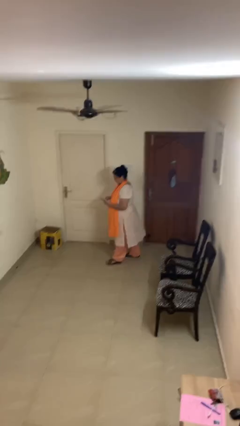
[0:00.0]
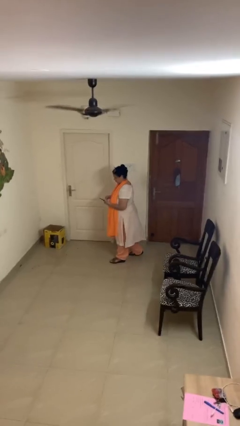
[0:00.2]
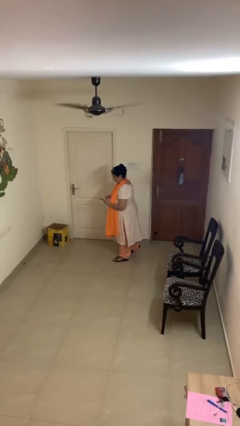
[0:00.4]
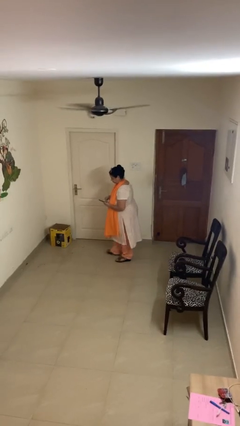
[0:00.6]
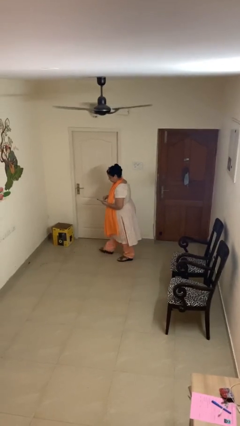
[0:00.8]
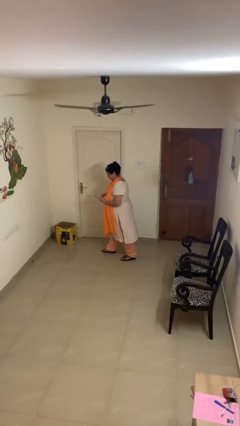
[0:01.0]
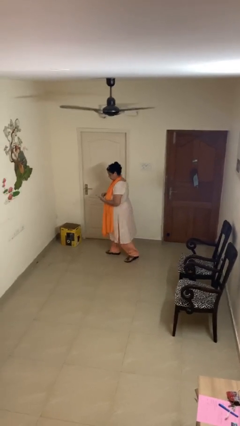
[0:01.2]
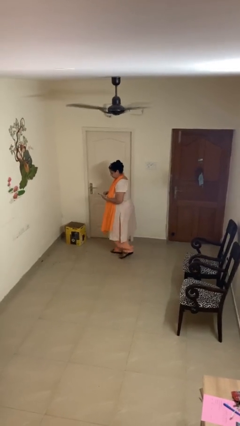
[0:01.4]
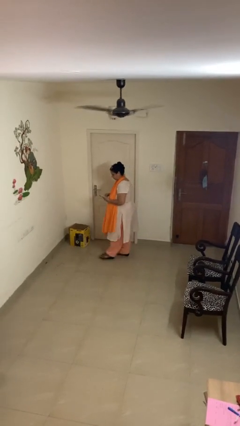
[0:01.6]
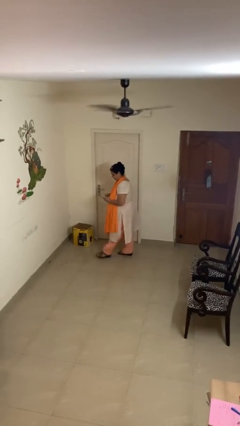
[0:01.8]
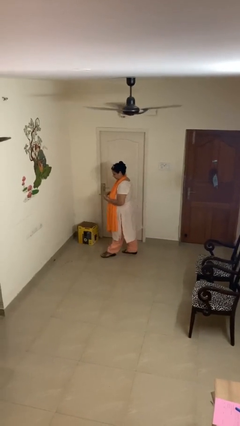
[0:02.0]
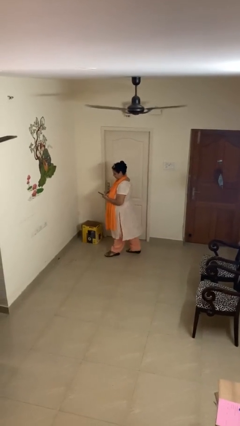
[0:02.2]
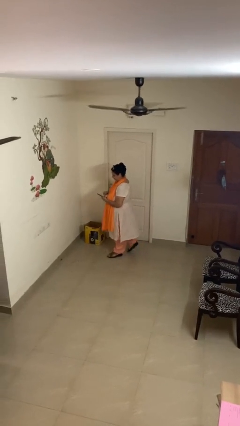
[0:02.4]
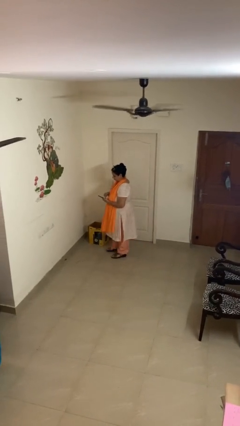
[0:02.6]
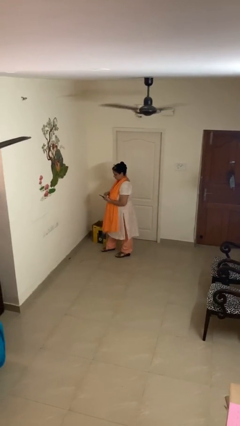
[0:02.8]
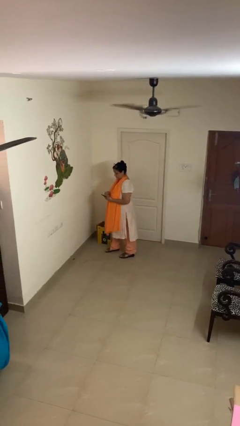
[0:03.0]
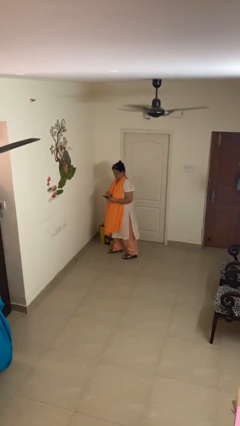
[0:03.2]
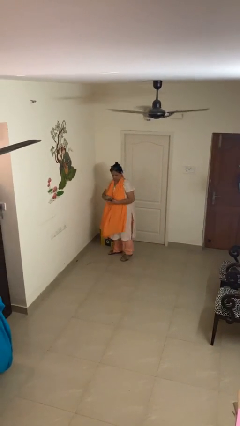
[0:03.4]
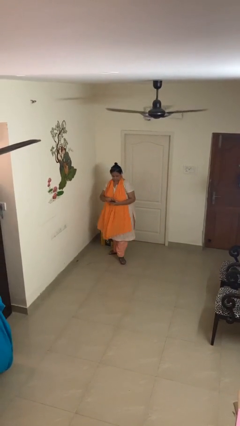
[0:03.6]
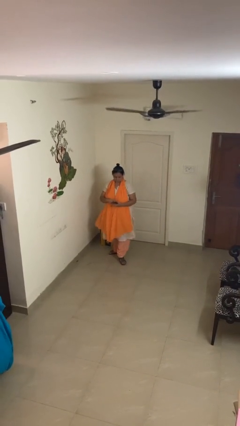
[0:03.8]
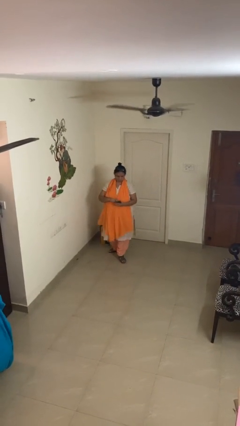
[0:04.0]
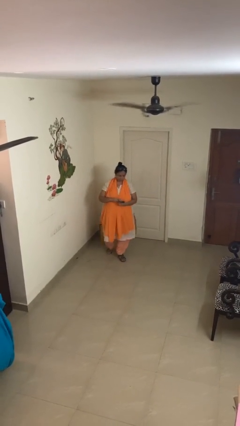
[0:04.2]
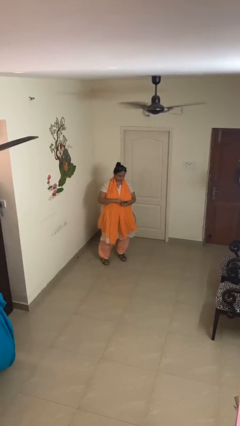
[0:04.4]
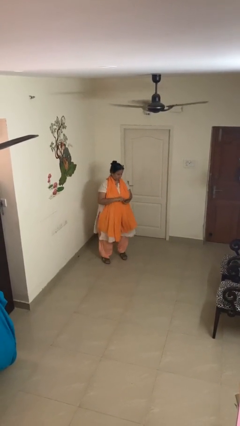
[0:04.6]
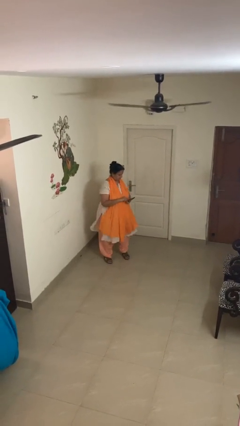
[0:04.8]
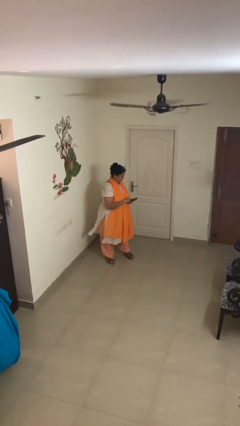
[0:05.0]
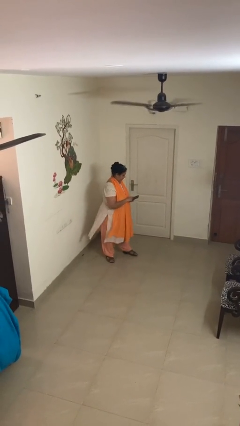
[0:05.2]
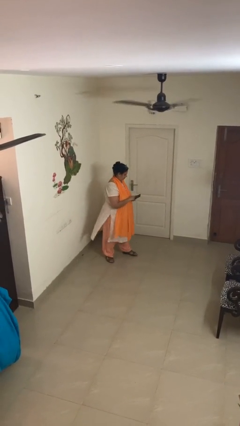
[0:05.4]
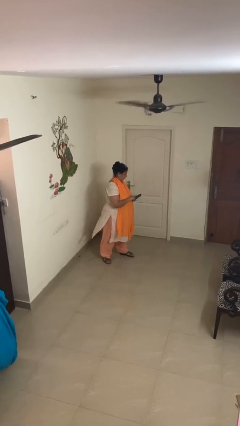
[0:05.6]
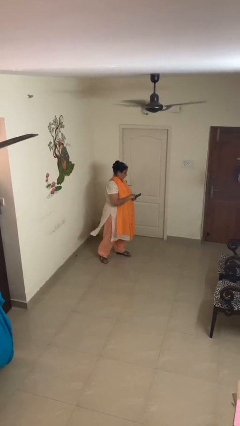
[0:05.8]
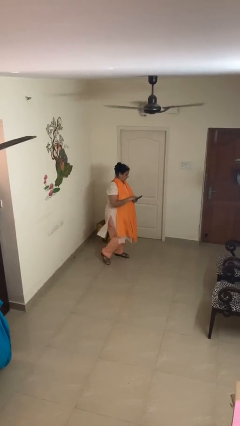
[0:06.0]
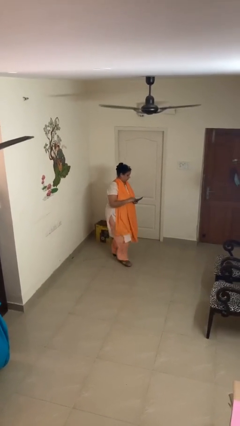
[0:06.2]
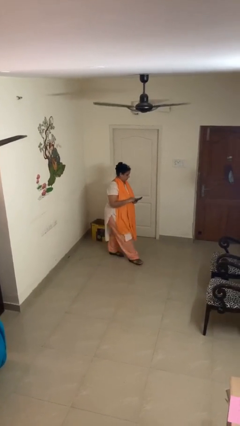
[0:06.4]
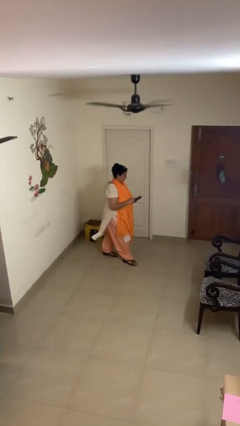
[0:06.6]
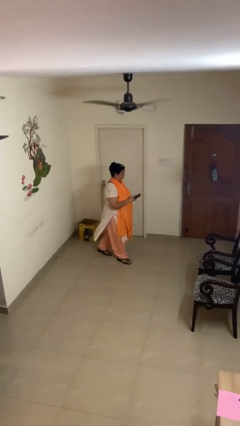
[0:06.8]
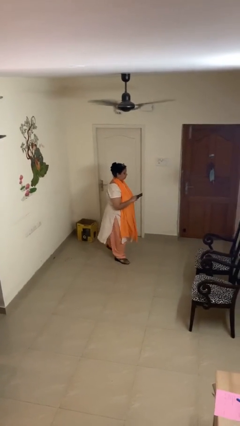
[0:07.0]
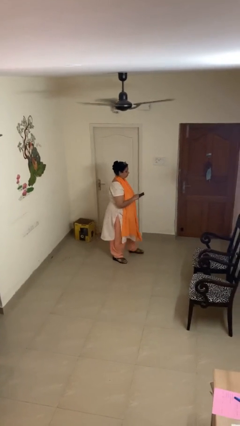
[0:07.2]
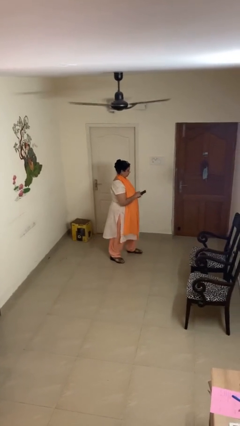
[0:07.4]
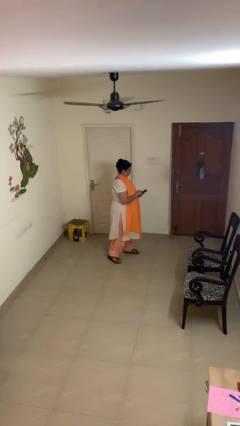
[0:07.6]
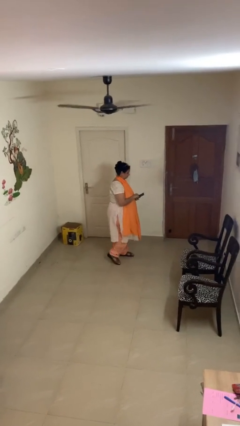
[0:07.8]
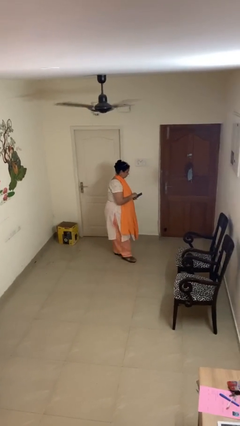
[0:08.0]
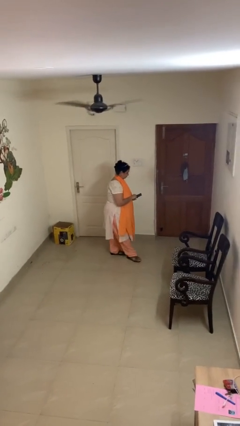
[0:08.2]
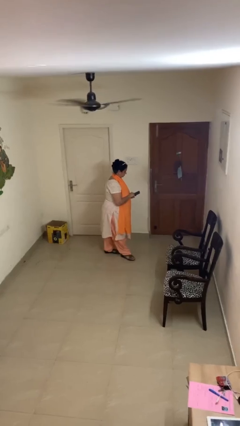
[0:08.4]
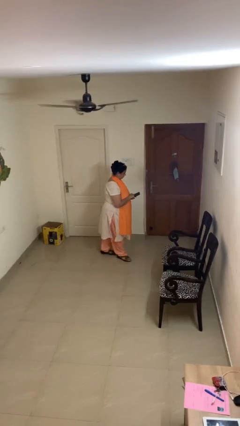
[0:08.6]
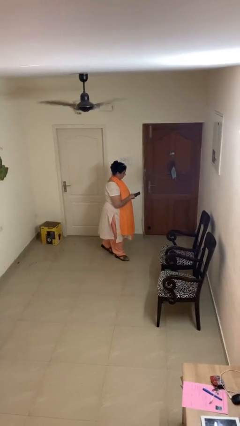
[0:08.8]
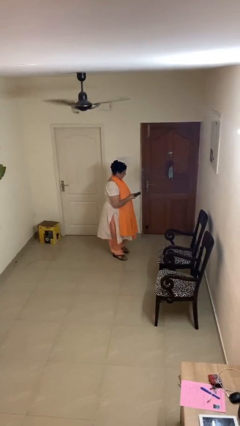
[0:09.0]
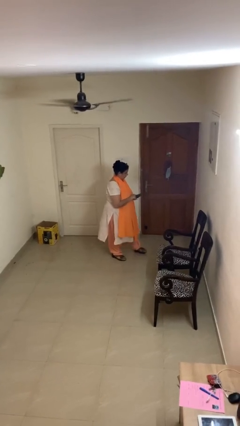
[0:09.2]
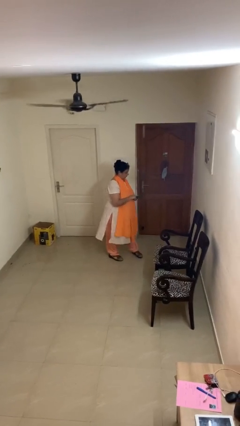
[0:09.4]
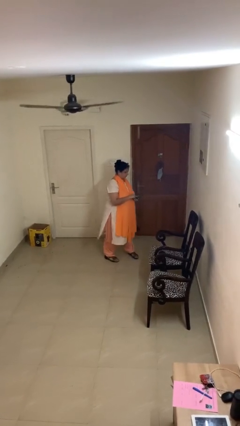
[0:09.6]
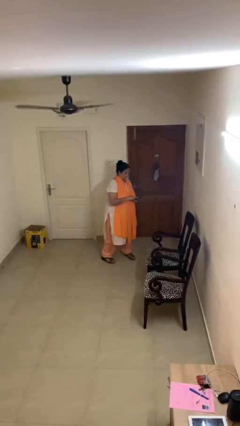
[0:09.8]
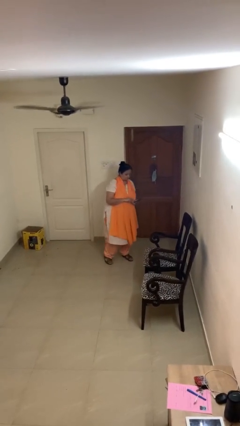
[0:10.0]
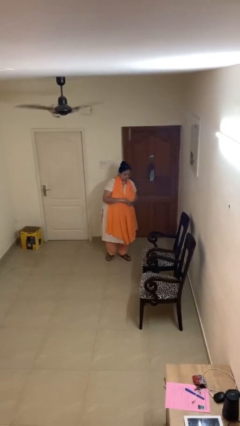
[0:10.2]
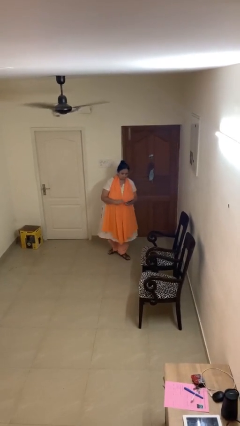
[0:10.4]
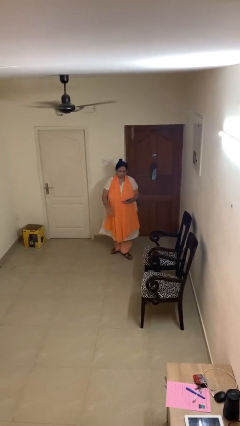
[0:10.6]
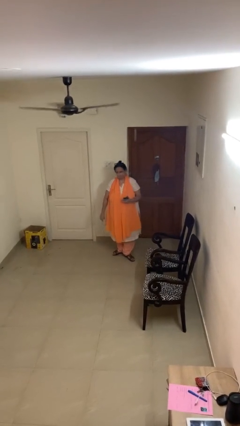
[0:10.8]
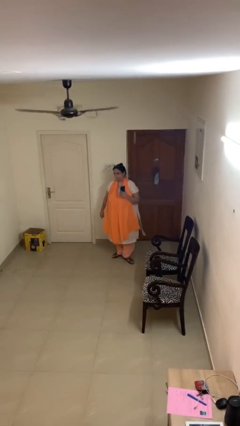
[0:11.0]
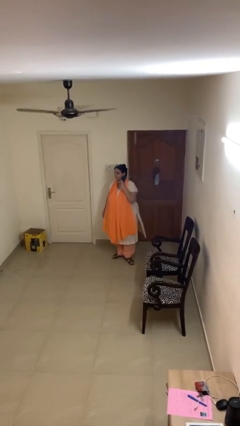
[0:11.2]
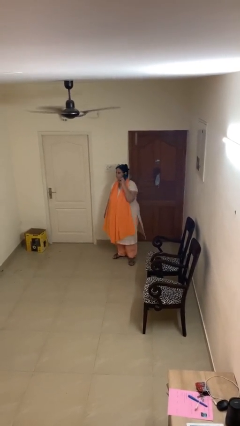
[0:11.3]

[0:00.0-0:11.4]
person texts on phone

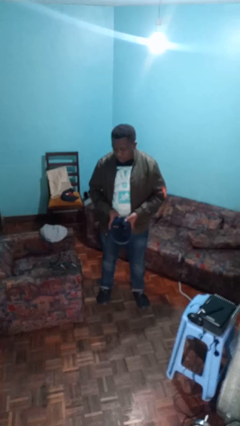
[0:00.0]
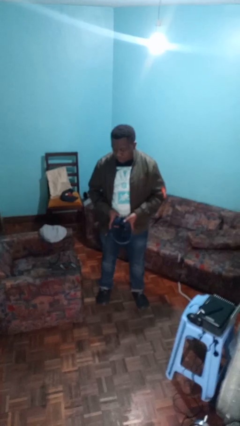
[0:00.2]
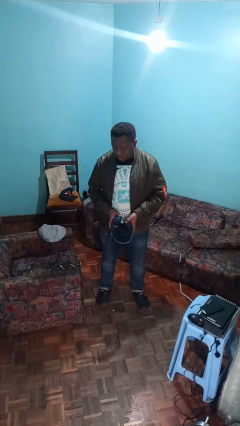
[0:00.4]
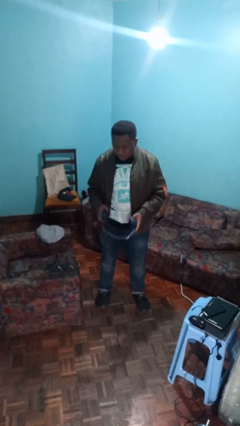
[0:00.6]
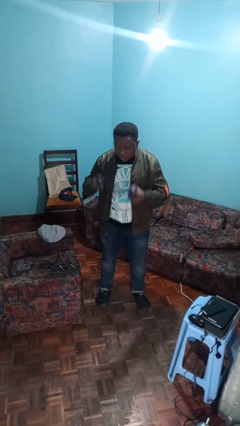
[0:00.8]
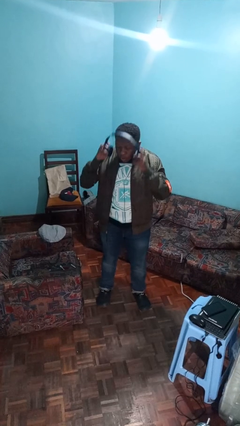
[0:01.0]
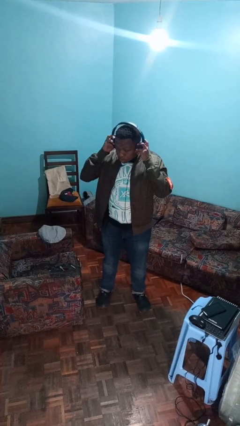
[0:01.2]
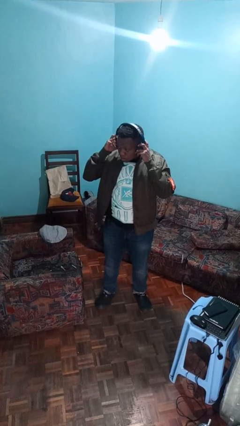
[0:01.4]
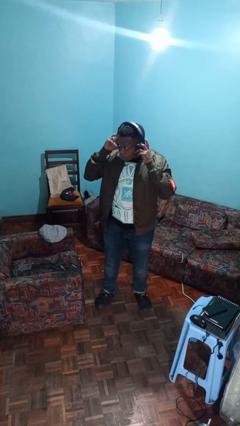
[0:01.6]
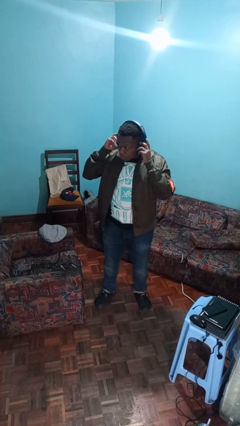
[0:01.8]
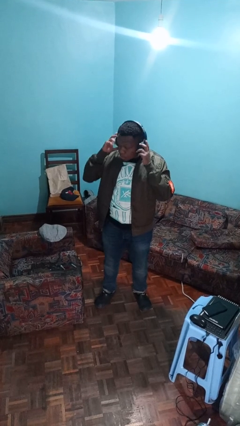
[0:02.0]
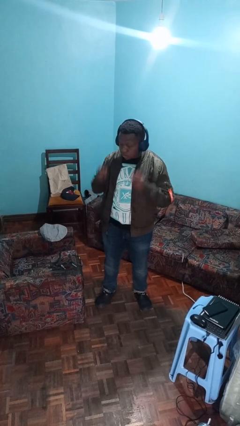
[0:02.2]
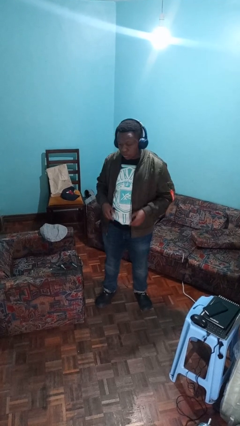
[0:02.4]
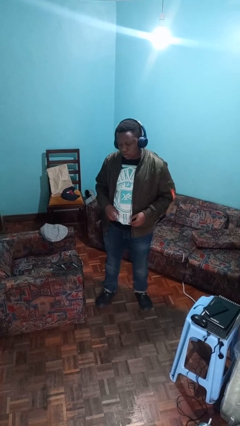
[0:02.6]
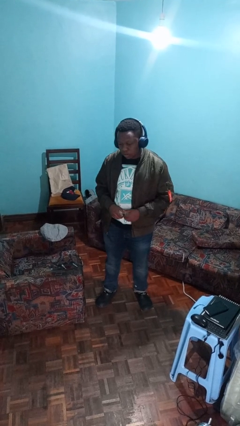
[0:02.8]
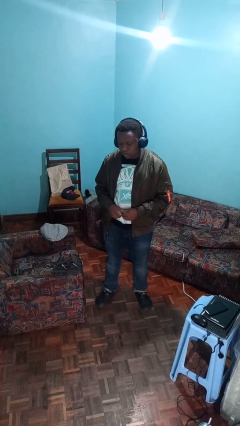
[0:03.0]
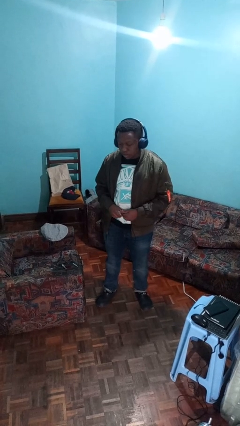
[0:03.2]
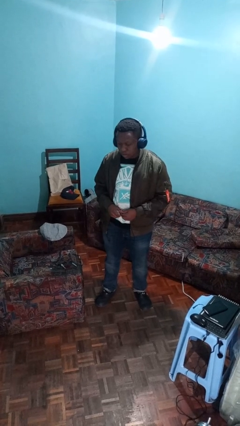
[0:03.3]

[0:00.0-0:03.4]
person puts on headphones

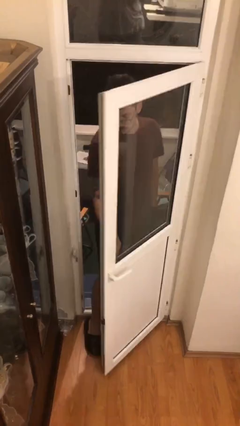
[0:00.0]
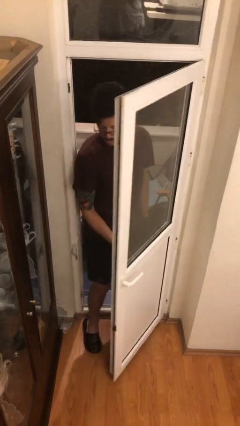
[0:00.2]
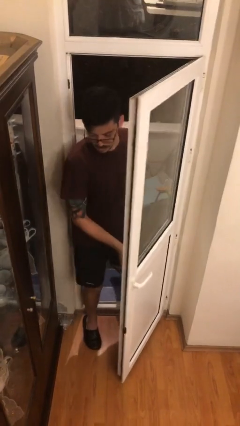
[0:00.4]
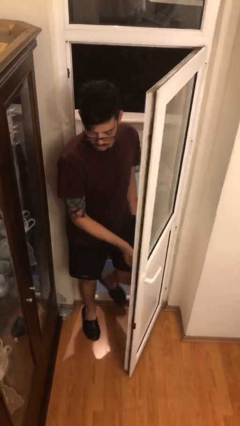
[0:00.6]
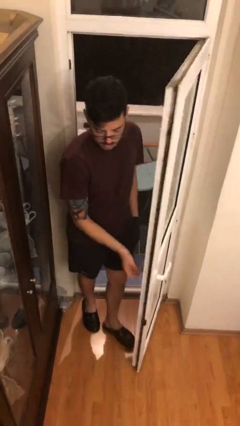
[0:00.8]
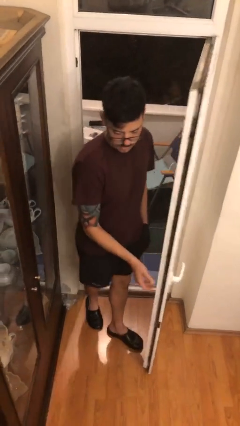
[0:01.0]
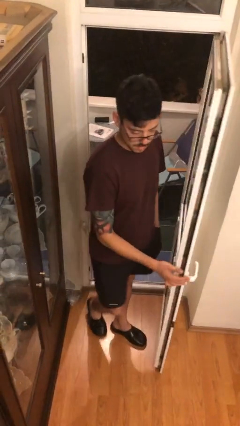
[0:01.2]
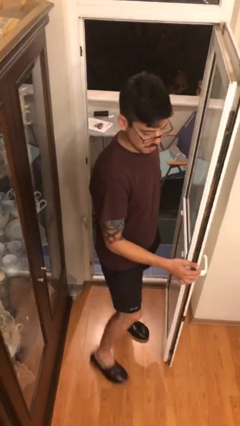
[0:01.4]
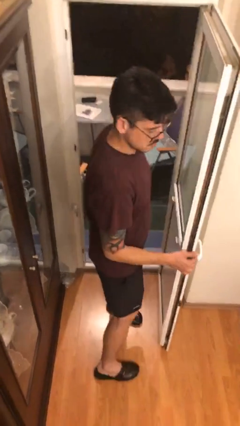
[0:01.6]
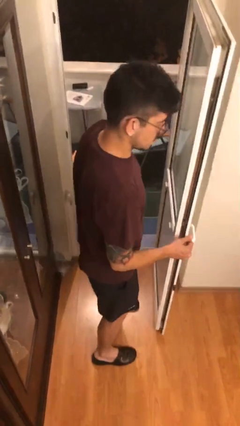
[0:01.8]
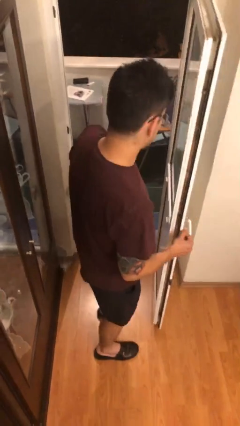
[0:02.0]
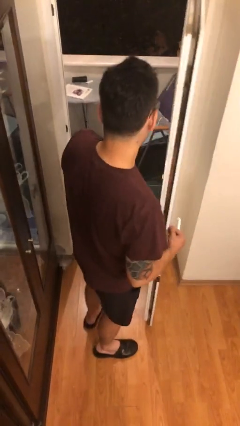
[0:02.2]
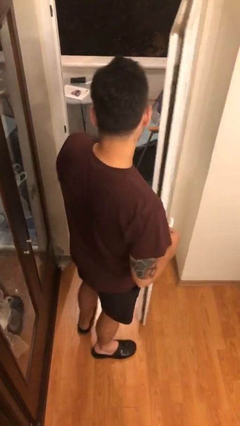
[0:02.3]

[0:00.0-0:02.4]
person enters scene through structure

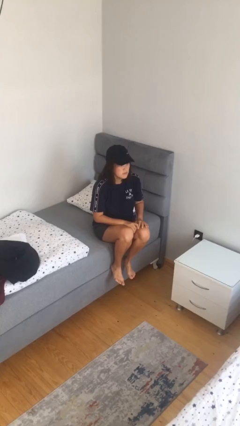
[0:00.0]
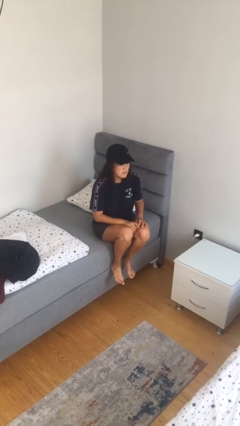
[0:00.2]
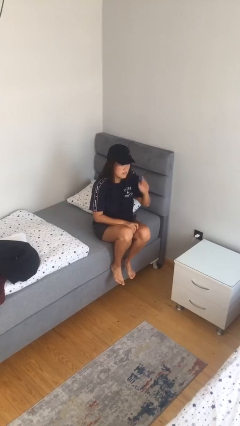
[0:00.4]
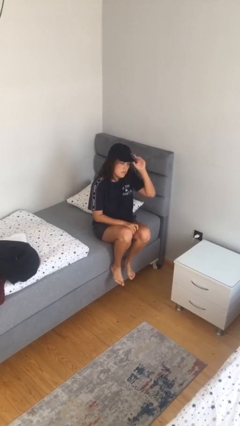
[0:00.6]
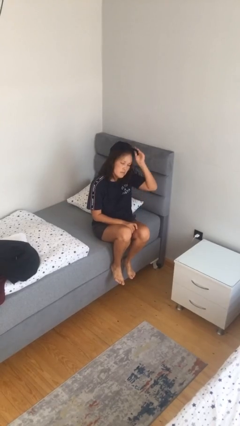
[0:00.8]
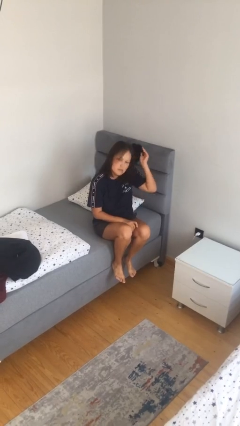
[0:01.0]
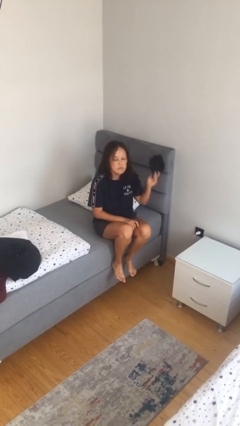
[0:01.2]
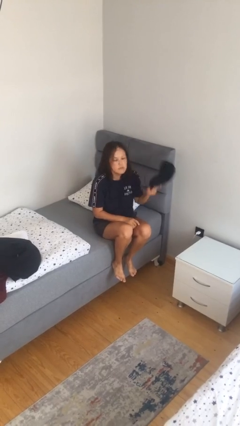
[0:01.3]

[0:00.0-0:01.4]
person takes off hat
